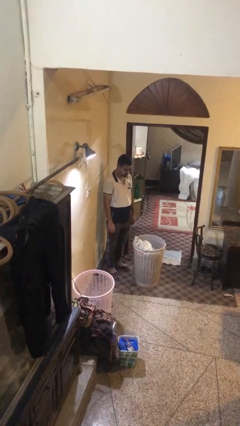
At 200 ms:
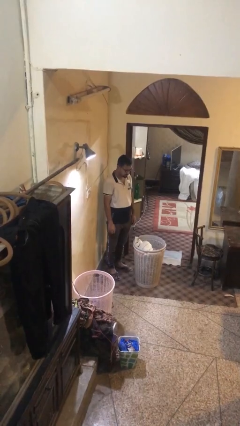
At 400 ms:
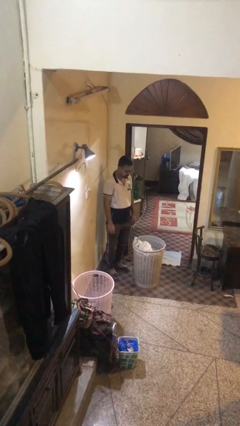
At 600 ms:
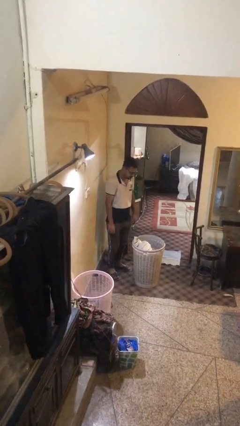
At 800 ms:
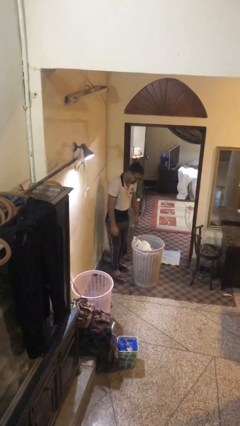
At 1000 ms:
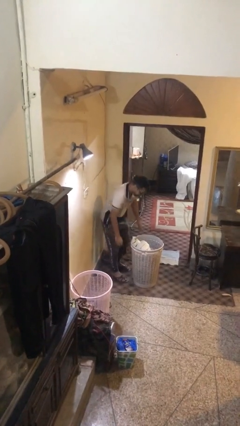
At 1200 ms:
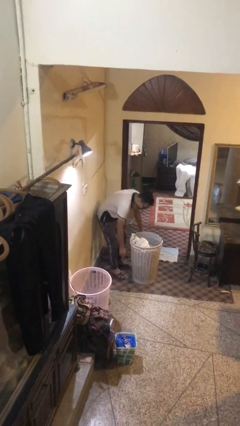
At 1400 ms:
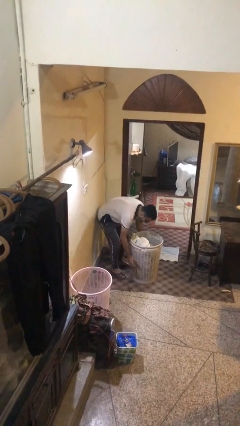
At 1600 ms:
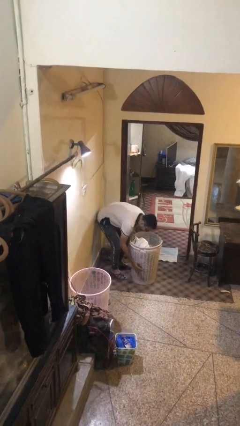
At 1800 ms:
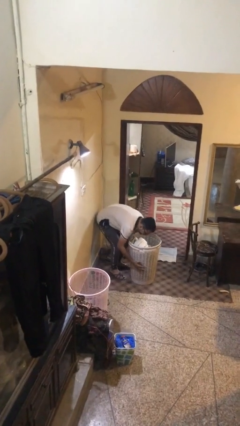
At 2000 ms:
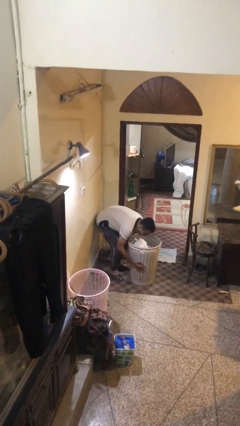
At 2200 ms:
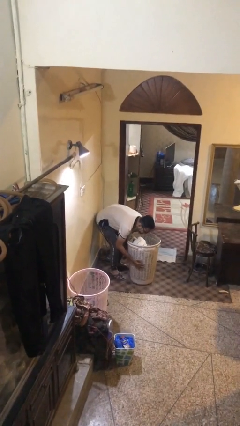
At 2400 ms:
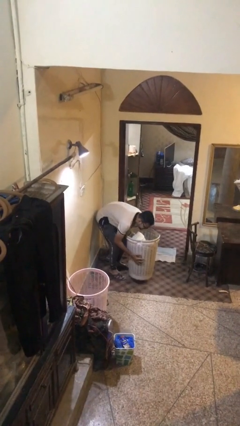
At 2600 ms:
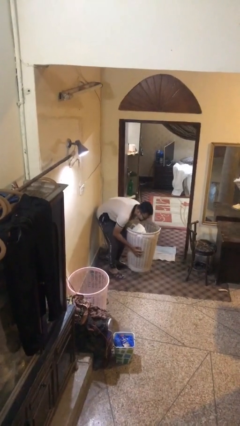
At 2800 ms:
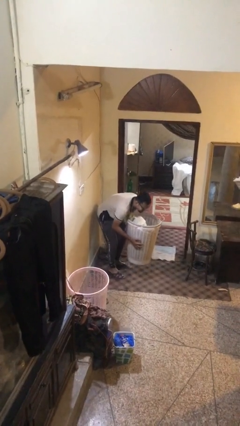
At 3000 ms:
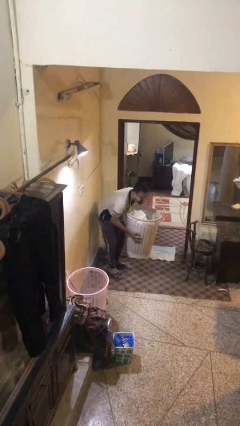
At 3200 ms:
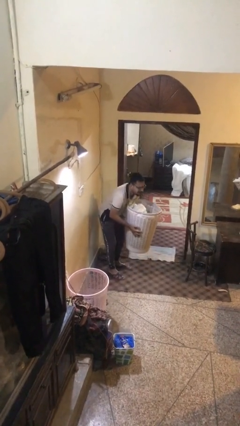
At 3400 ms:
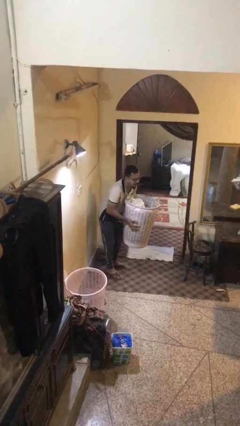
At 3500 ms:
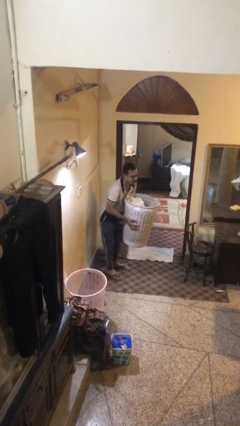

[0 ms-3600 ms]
person picks up object from floor

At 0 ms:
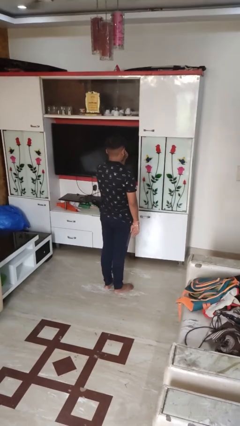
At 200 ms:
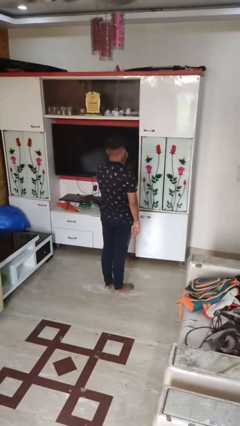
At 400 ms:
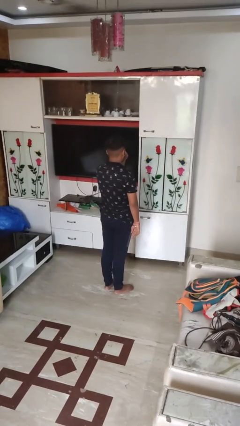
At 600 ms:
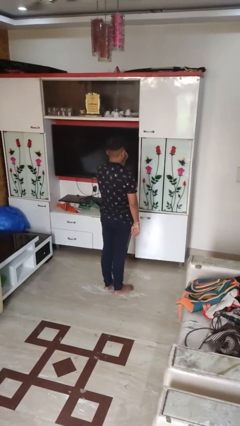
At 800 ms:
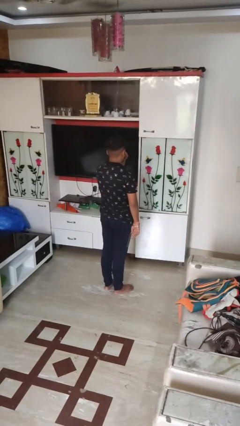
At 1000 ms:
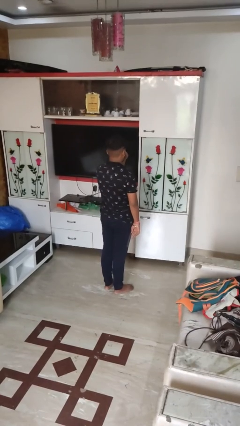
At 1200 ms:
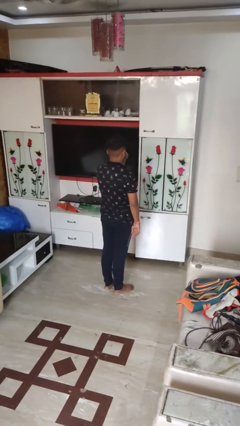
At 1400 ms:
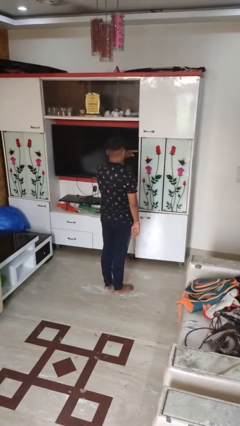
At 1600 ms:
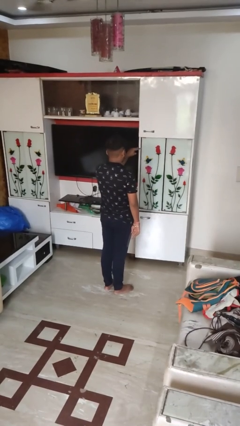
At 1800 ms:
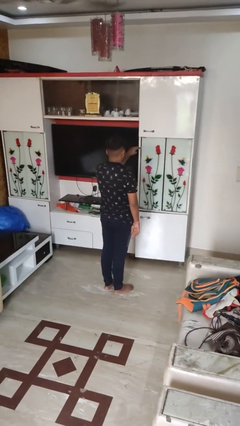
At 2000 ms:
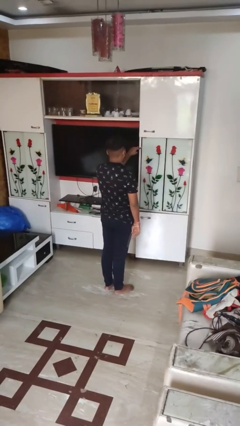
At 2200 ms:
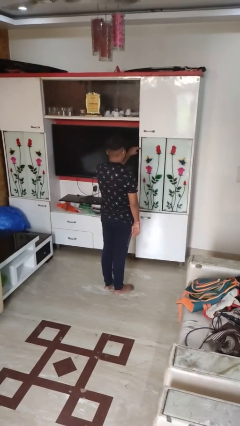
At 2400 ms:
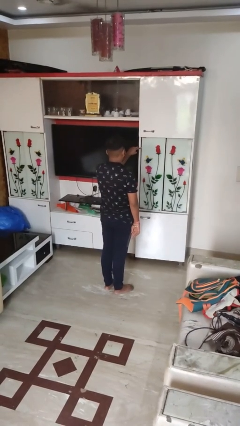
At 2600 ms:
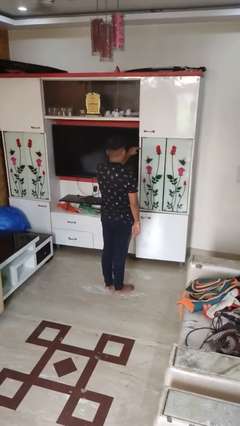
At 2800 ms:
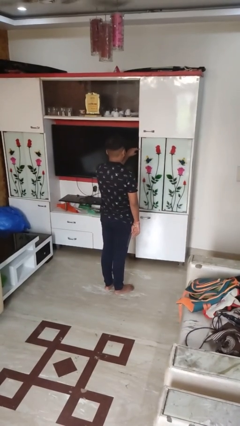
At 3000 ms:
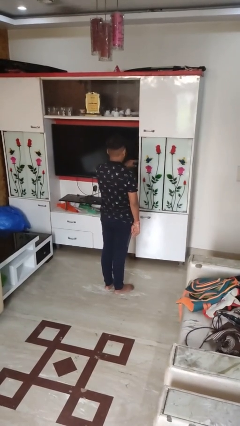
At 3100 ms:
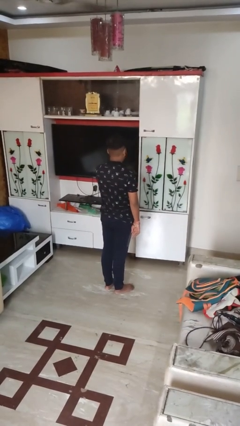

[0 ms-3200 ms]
person gestures watch closely

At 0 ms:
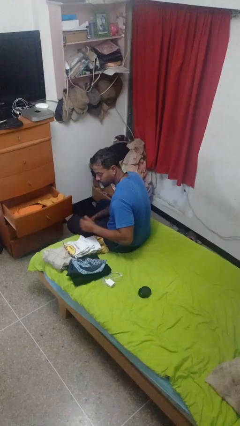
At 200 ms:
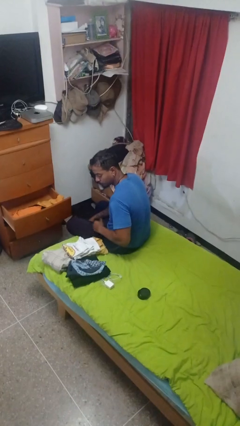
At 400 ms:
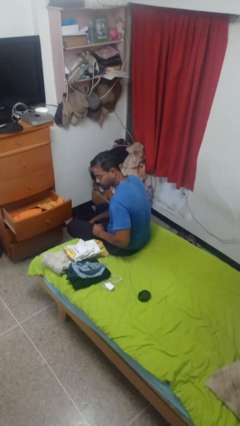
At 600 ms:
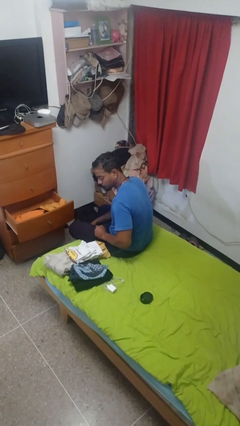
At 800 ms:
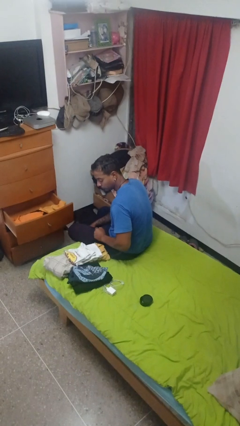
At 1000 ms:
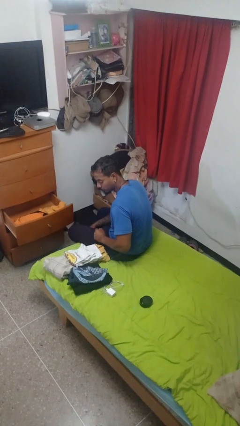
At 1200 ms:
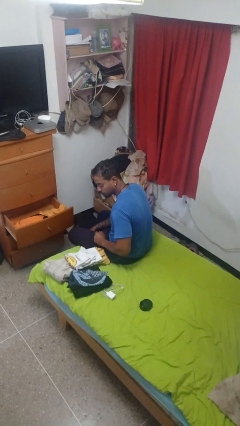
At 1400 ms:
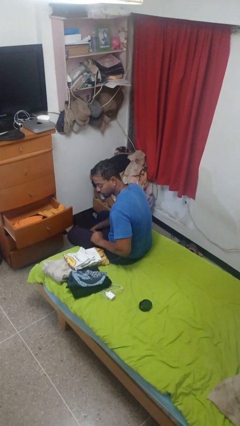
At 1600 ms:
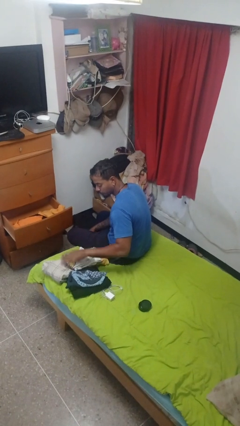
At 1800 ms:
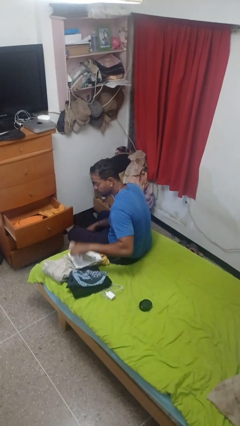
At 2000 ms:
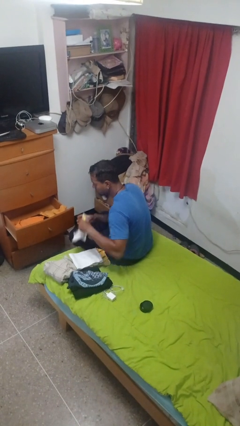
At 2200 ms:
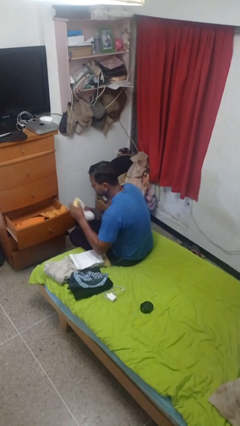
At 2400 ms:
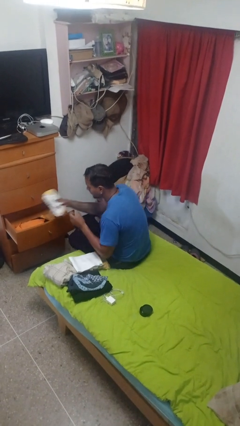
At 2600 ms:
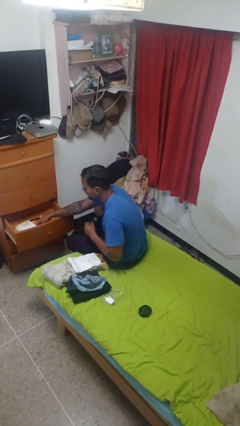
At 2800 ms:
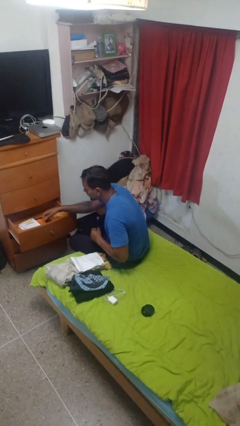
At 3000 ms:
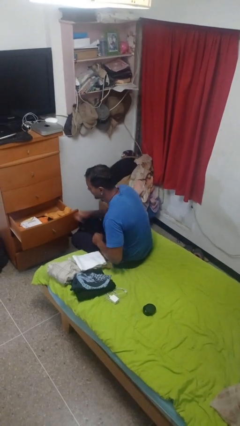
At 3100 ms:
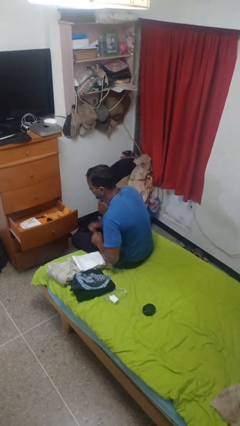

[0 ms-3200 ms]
person puts clothes into dresser

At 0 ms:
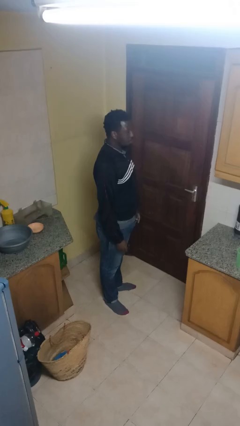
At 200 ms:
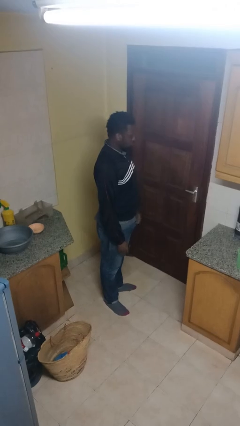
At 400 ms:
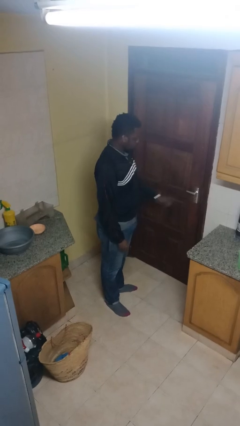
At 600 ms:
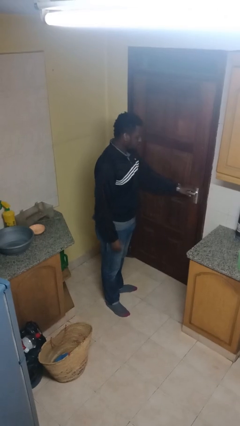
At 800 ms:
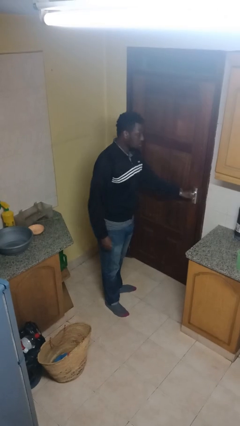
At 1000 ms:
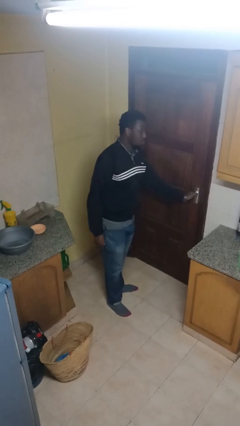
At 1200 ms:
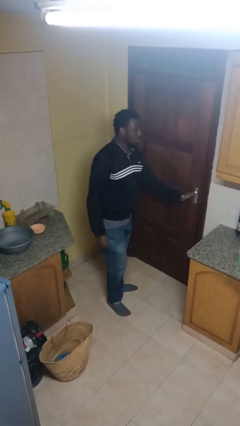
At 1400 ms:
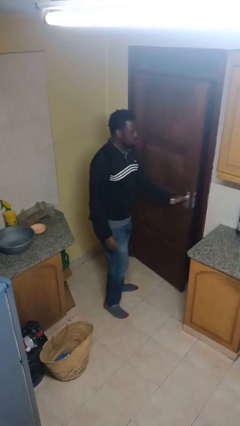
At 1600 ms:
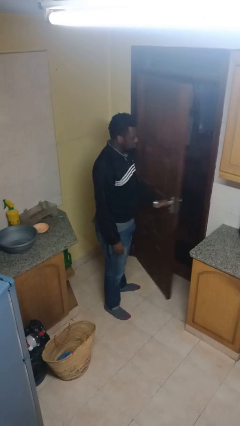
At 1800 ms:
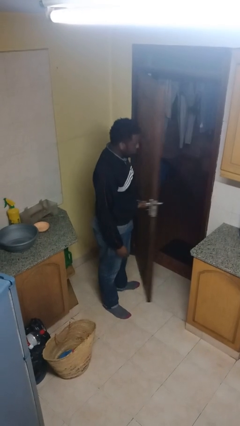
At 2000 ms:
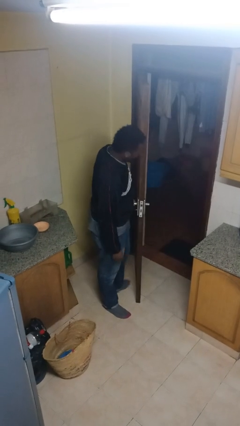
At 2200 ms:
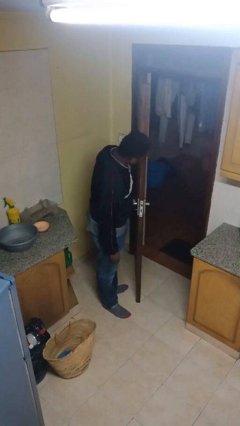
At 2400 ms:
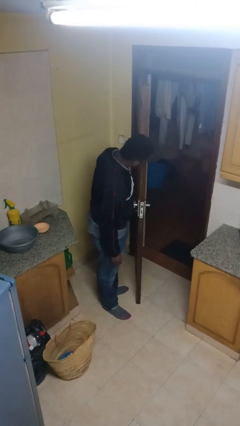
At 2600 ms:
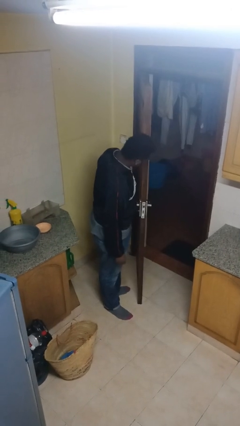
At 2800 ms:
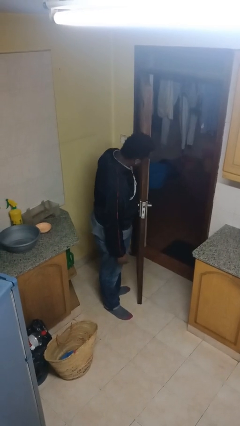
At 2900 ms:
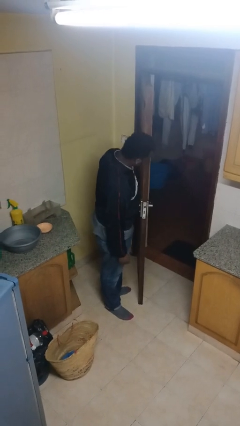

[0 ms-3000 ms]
person opens facility door

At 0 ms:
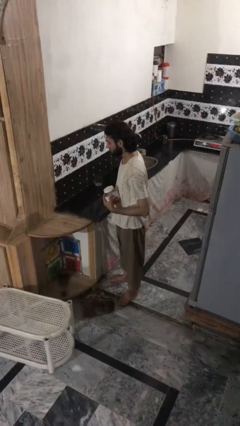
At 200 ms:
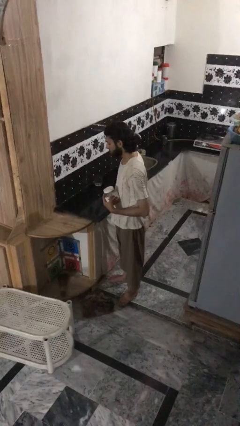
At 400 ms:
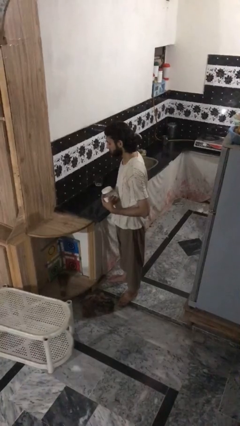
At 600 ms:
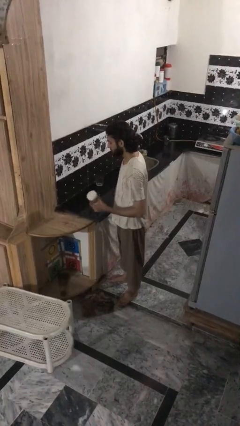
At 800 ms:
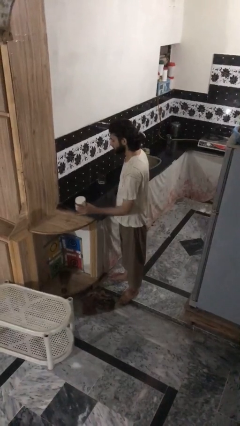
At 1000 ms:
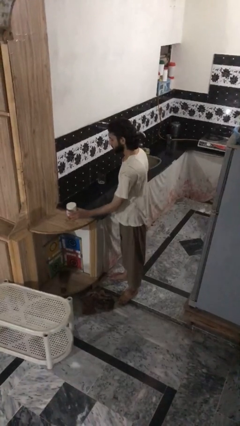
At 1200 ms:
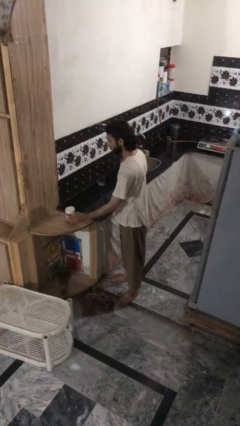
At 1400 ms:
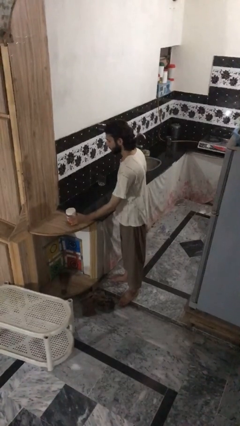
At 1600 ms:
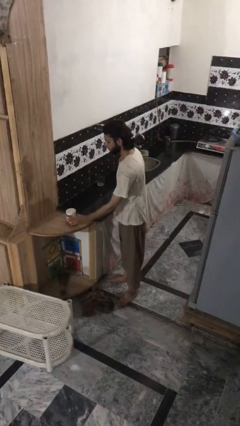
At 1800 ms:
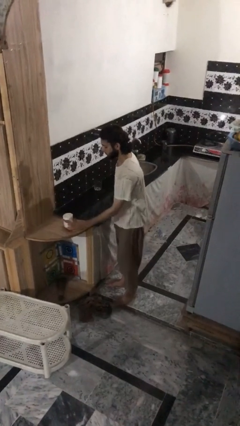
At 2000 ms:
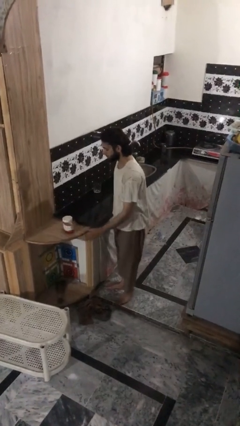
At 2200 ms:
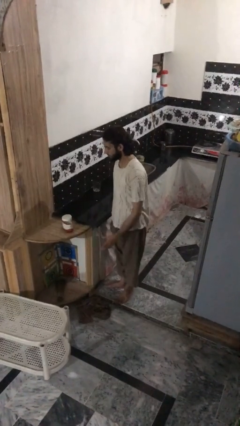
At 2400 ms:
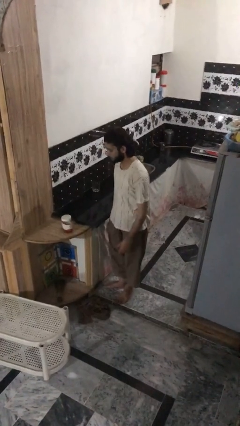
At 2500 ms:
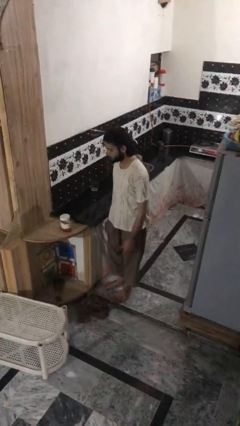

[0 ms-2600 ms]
person puts down object on countertop

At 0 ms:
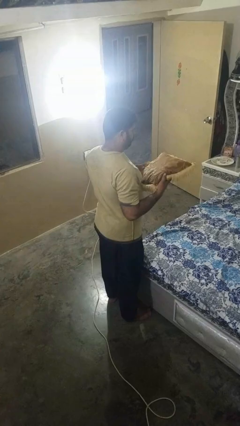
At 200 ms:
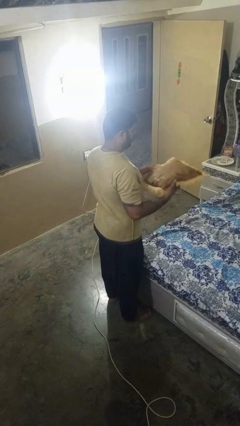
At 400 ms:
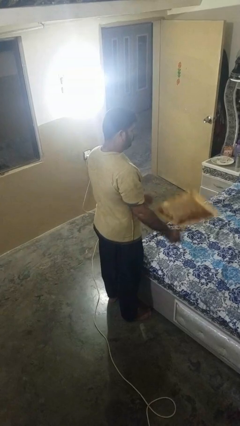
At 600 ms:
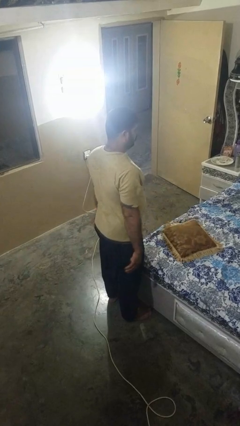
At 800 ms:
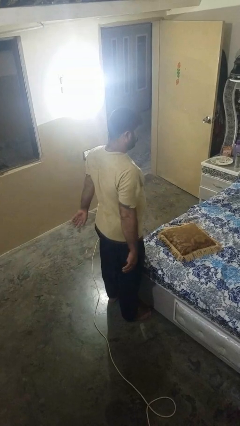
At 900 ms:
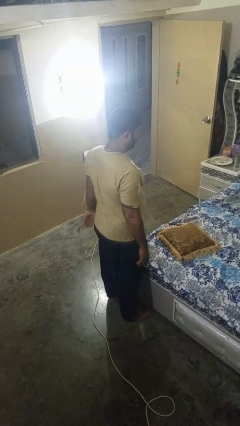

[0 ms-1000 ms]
person puts down object on bed

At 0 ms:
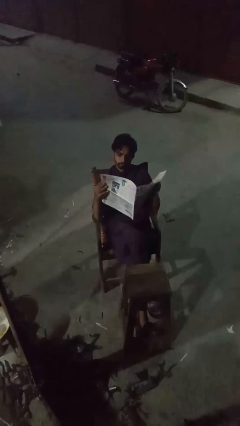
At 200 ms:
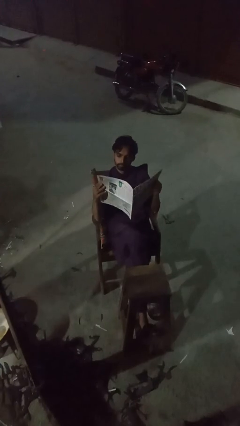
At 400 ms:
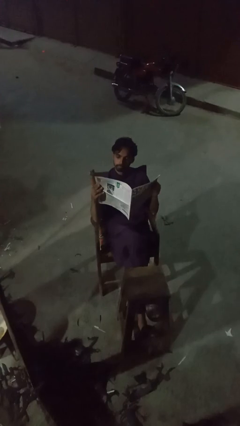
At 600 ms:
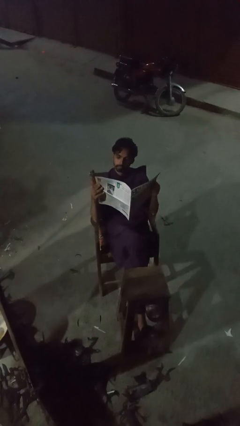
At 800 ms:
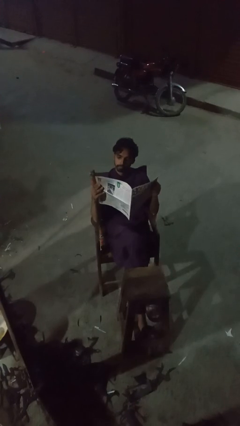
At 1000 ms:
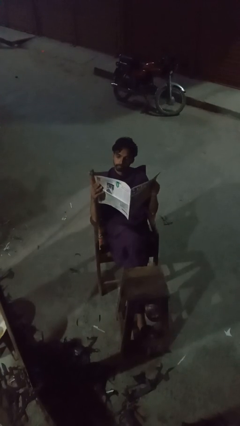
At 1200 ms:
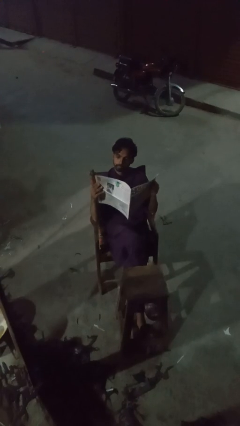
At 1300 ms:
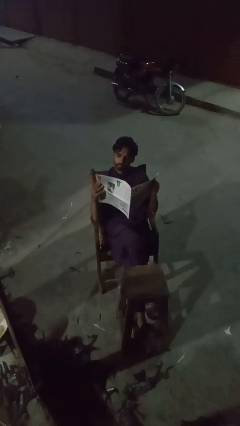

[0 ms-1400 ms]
person reads newspaper
